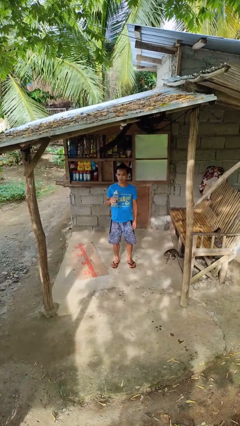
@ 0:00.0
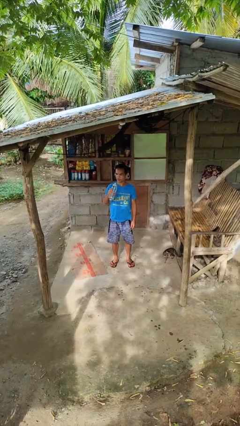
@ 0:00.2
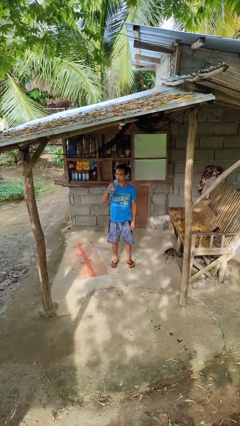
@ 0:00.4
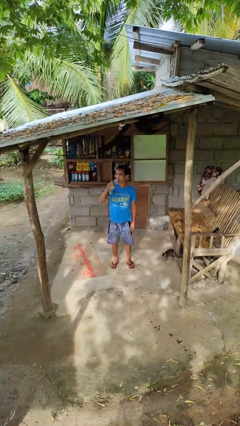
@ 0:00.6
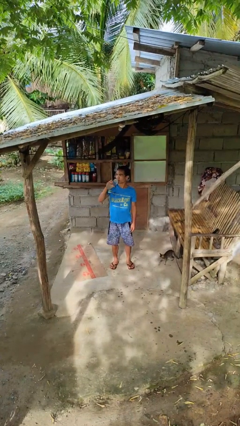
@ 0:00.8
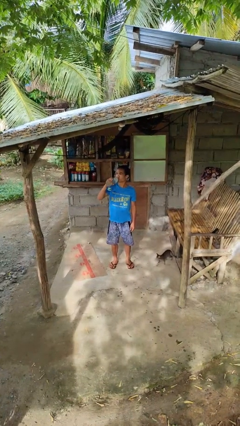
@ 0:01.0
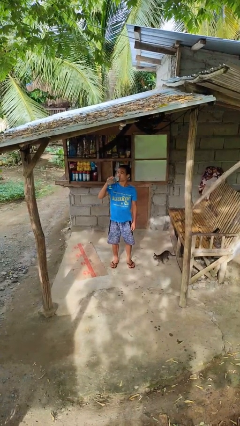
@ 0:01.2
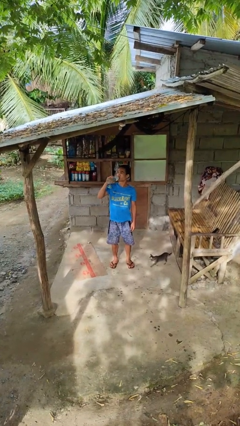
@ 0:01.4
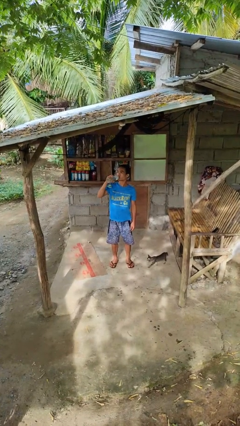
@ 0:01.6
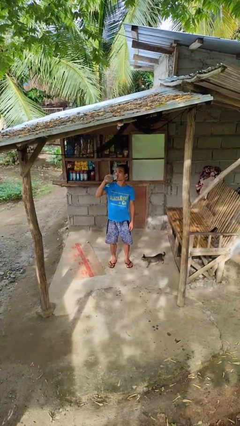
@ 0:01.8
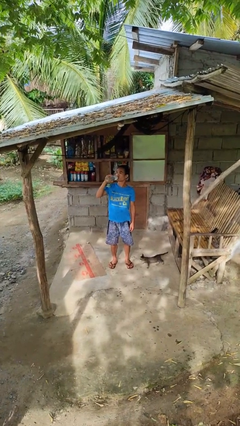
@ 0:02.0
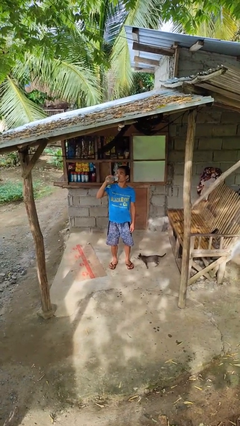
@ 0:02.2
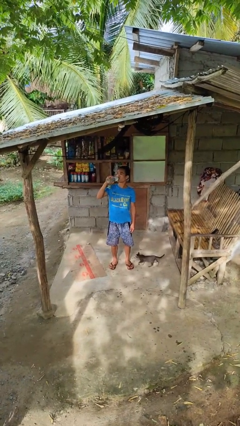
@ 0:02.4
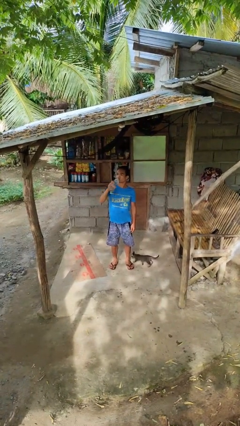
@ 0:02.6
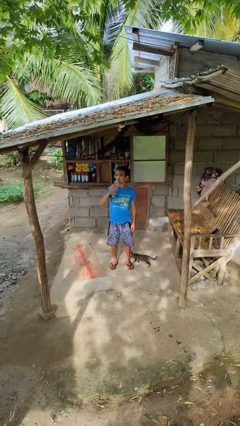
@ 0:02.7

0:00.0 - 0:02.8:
person drinks from bottle

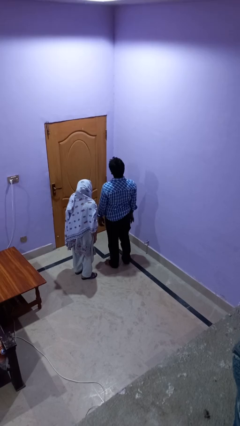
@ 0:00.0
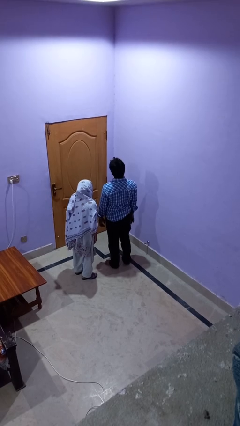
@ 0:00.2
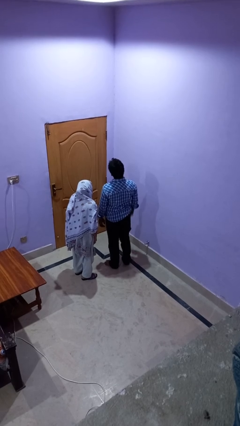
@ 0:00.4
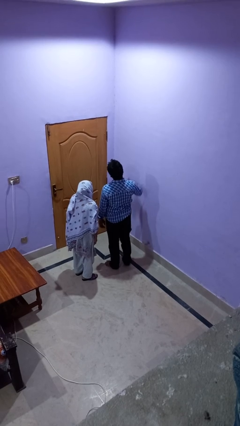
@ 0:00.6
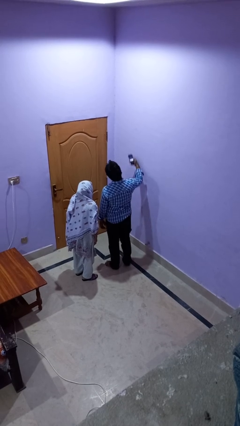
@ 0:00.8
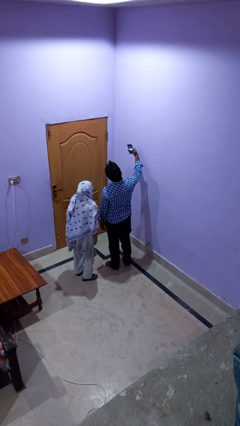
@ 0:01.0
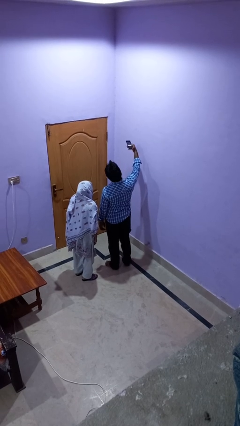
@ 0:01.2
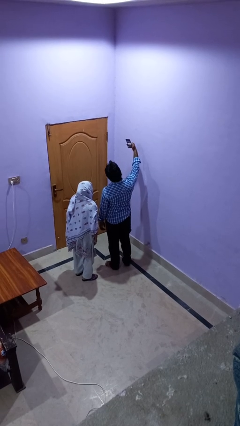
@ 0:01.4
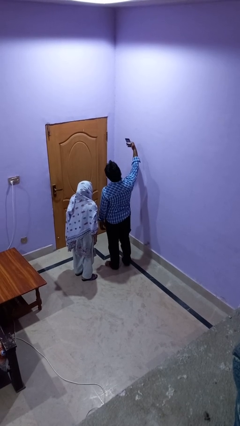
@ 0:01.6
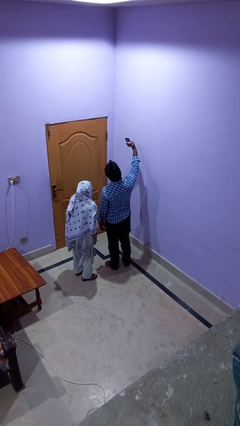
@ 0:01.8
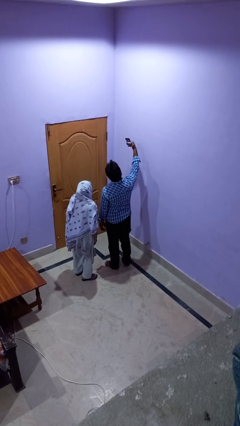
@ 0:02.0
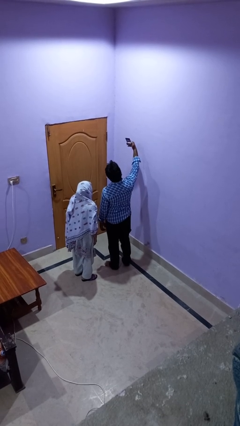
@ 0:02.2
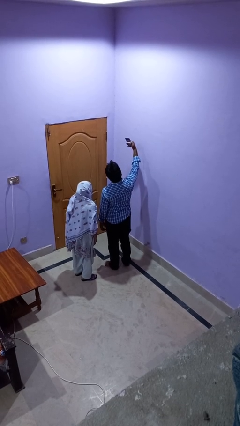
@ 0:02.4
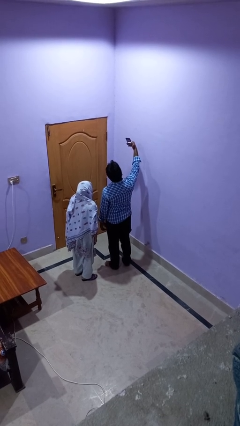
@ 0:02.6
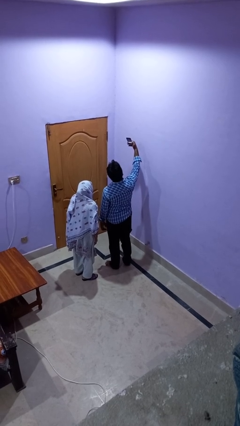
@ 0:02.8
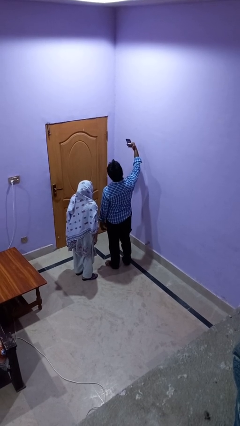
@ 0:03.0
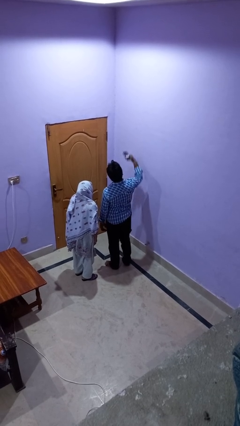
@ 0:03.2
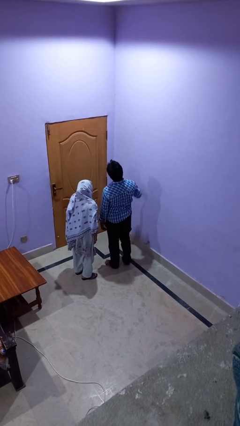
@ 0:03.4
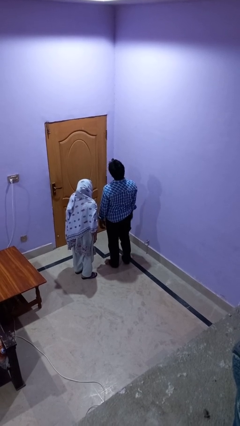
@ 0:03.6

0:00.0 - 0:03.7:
person takes selfie with person

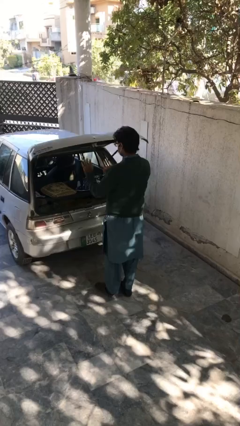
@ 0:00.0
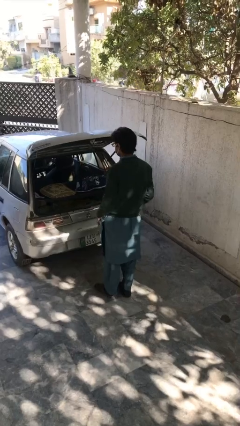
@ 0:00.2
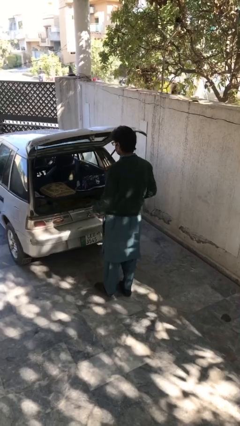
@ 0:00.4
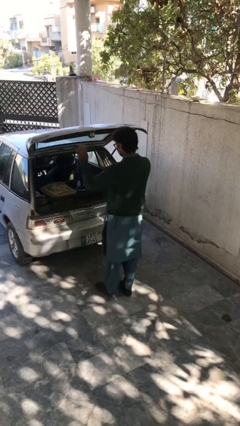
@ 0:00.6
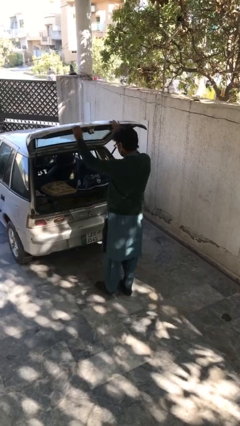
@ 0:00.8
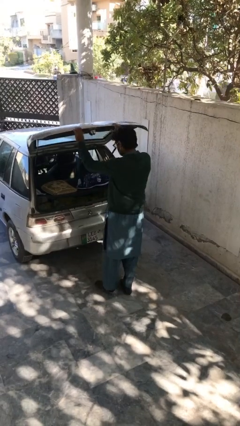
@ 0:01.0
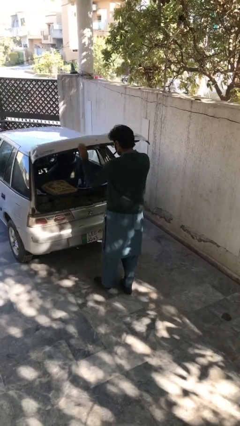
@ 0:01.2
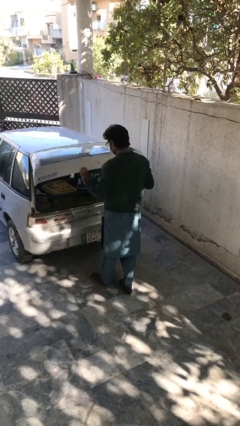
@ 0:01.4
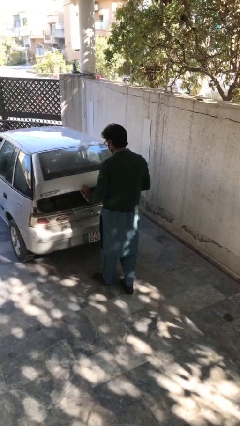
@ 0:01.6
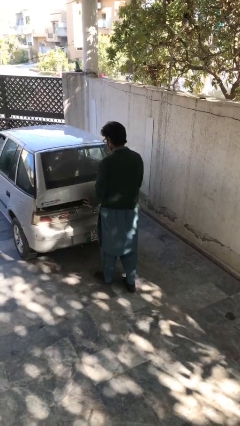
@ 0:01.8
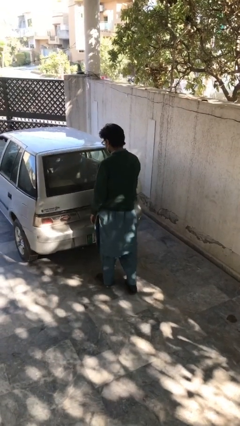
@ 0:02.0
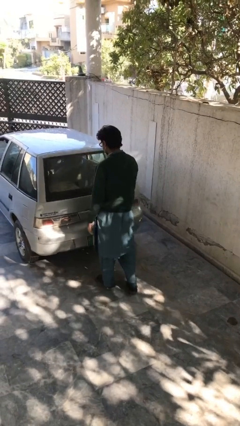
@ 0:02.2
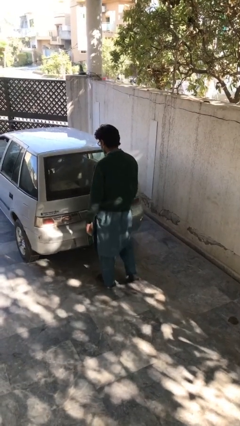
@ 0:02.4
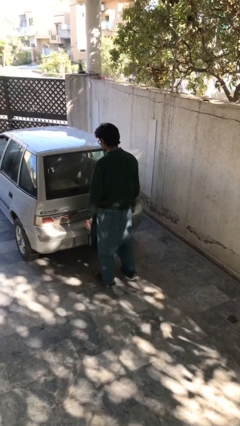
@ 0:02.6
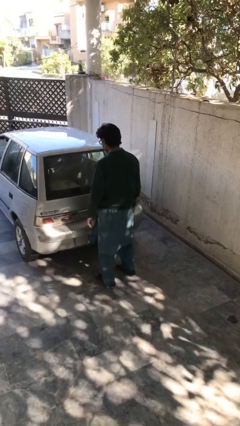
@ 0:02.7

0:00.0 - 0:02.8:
person closes car trunk

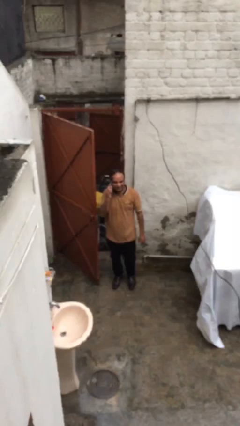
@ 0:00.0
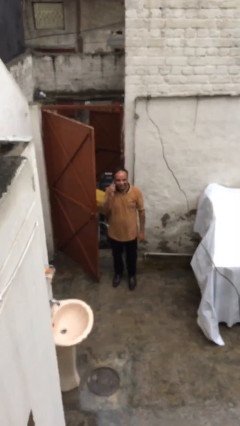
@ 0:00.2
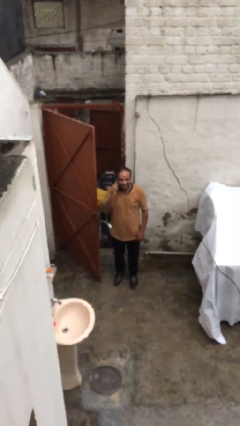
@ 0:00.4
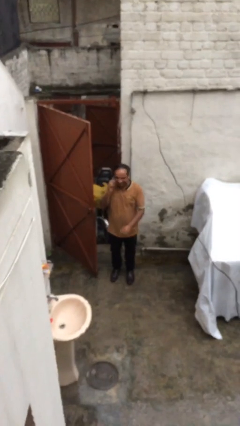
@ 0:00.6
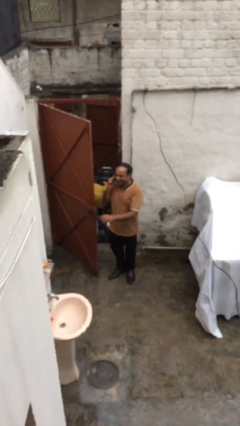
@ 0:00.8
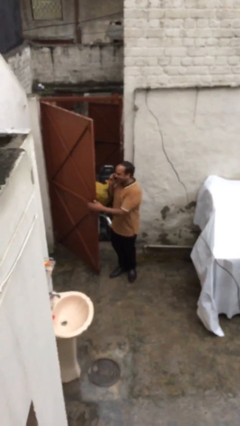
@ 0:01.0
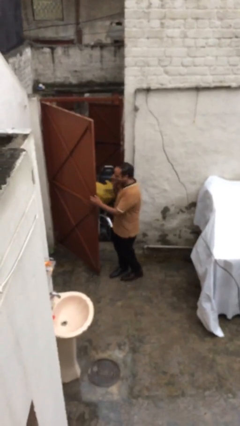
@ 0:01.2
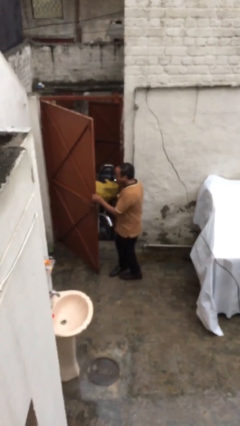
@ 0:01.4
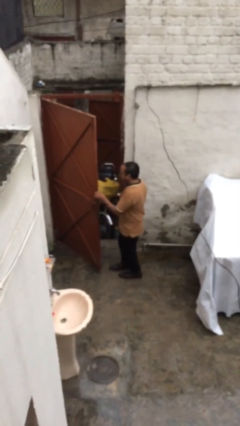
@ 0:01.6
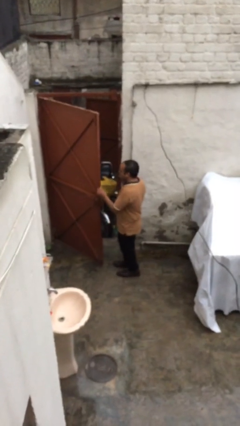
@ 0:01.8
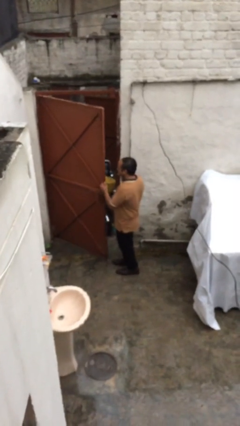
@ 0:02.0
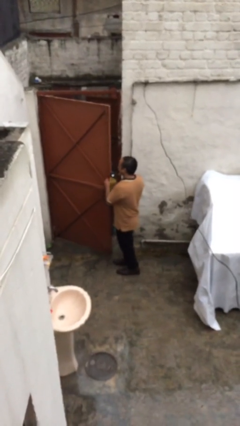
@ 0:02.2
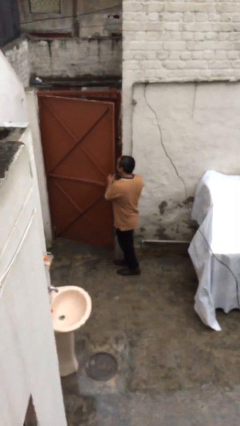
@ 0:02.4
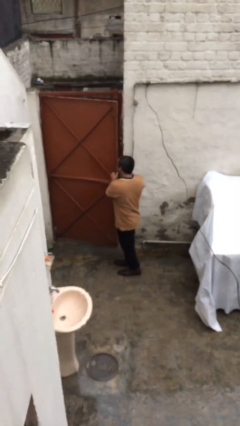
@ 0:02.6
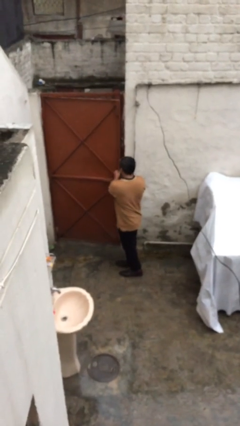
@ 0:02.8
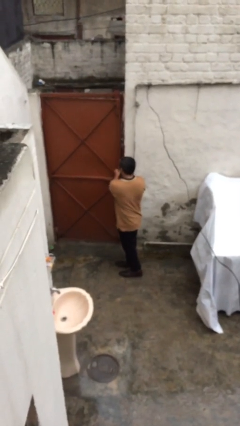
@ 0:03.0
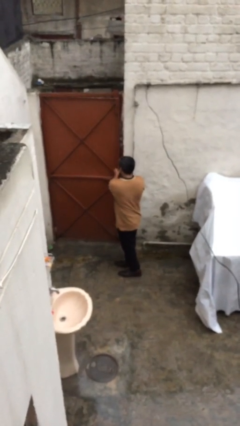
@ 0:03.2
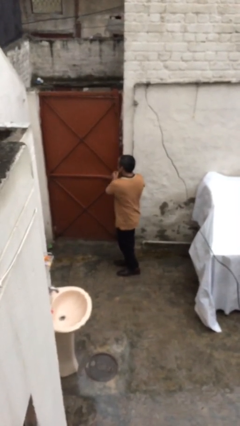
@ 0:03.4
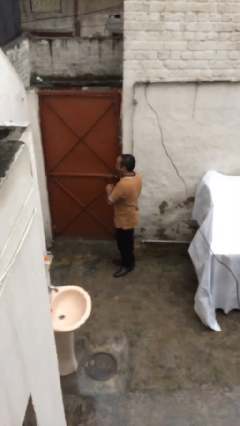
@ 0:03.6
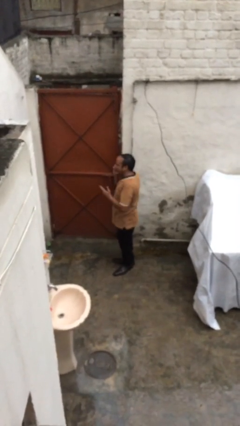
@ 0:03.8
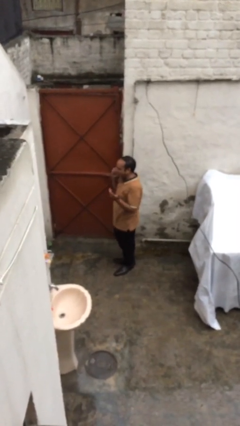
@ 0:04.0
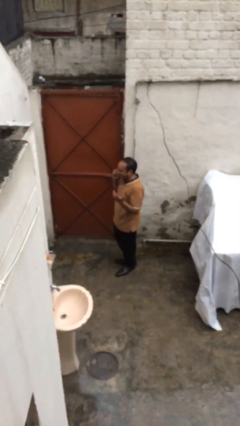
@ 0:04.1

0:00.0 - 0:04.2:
person closes facility door

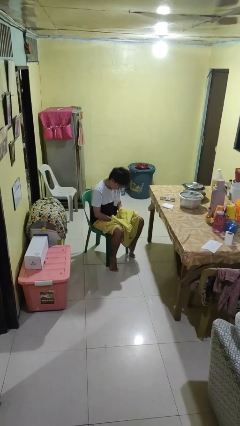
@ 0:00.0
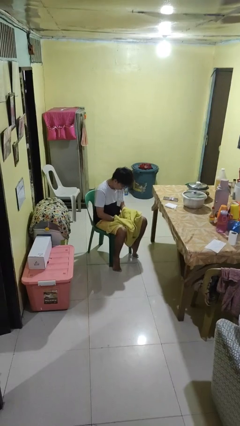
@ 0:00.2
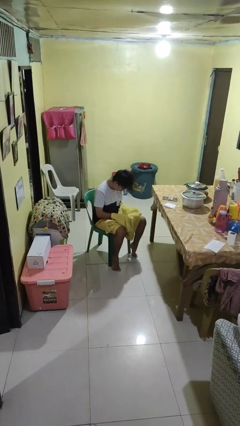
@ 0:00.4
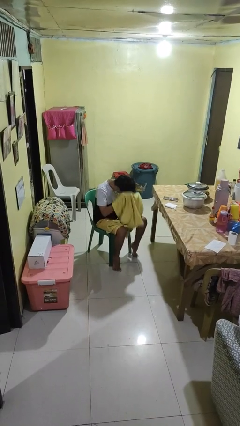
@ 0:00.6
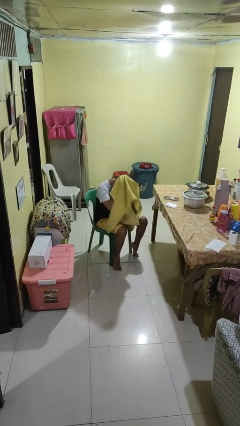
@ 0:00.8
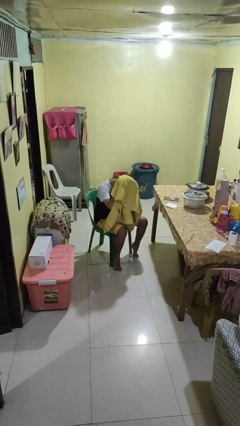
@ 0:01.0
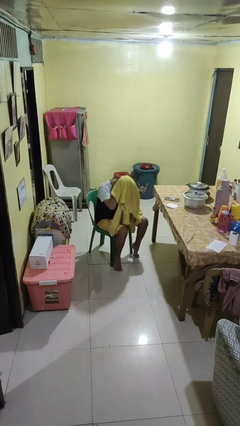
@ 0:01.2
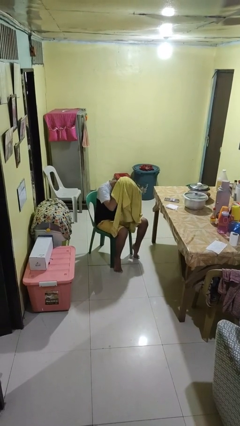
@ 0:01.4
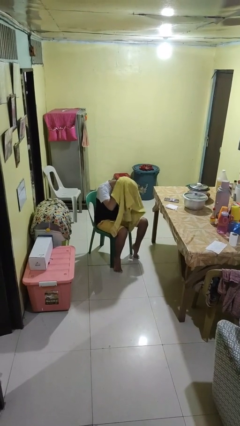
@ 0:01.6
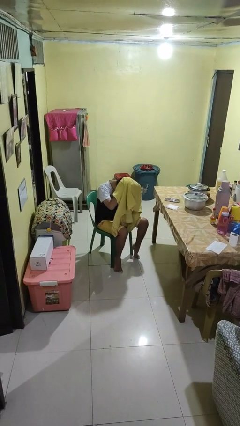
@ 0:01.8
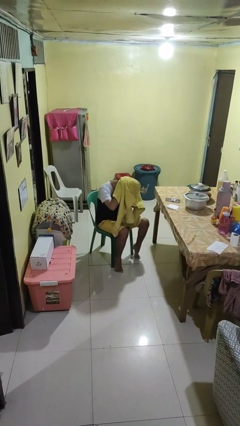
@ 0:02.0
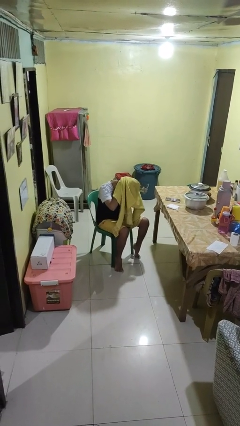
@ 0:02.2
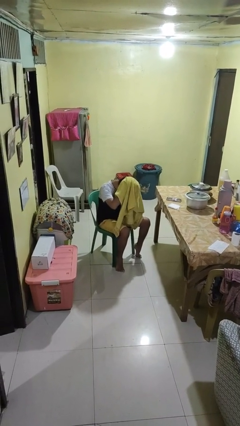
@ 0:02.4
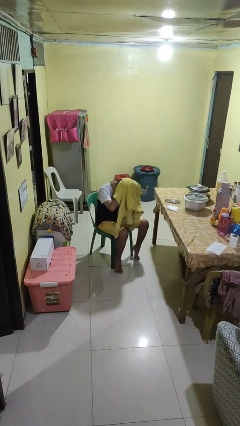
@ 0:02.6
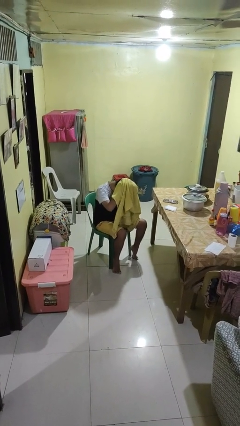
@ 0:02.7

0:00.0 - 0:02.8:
person dries hair with towel

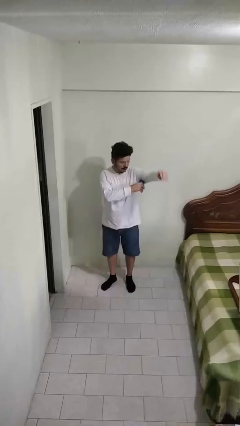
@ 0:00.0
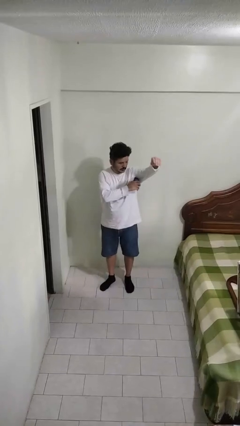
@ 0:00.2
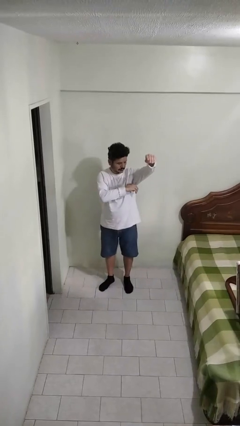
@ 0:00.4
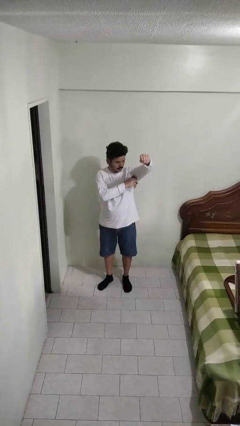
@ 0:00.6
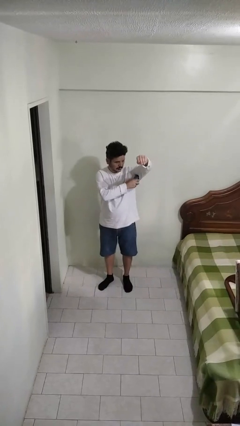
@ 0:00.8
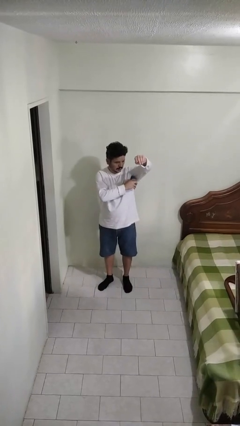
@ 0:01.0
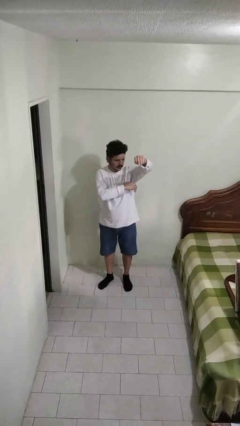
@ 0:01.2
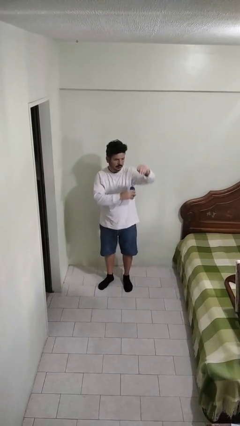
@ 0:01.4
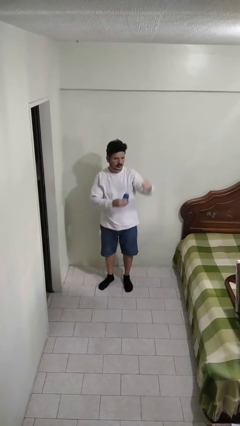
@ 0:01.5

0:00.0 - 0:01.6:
person applies deodorant
